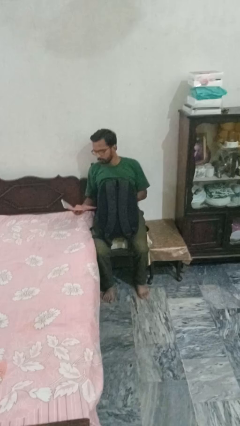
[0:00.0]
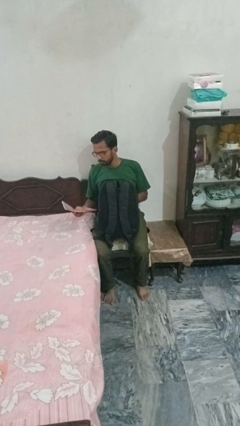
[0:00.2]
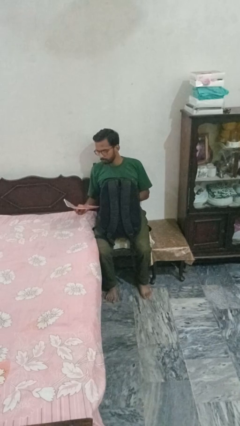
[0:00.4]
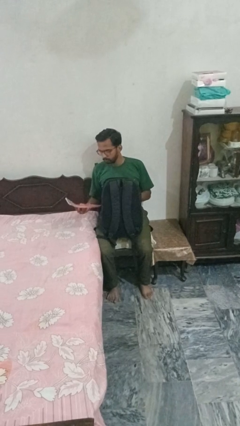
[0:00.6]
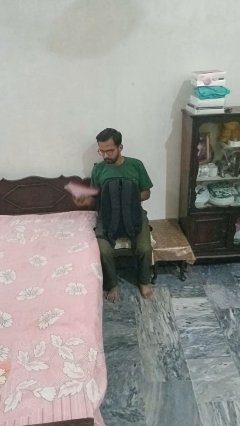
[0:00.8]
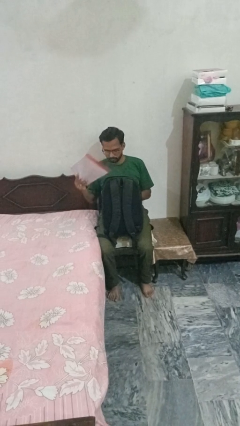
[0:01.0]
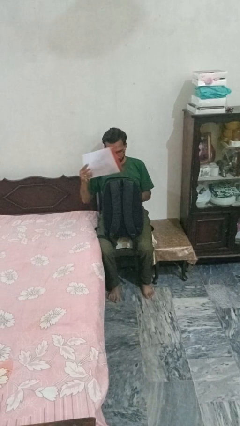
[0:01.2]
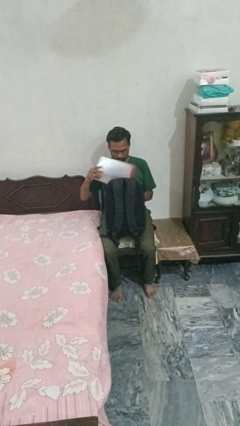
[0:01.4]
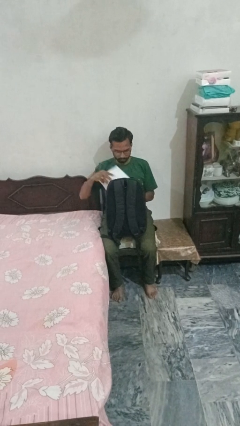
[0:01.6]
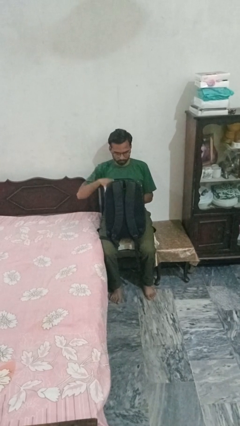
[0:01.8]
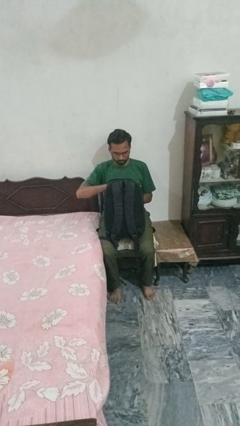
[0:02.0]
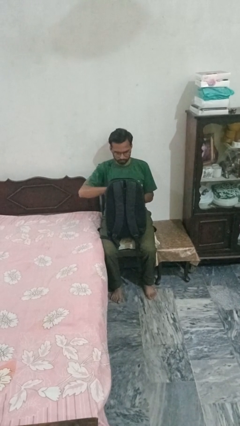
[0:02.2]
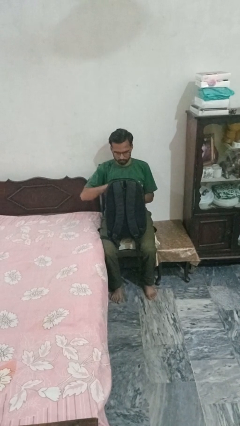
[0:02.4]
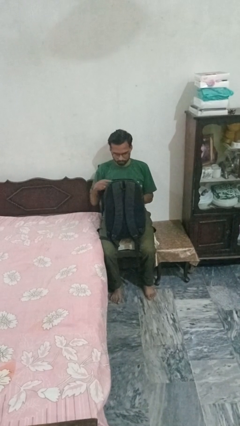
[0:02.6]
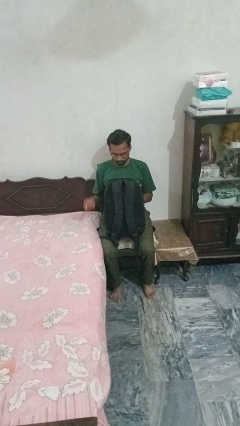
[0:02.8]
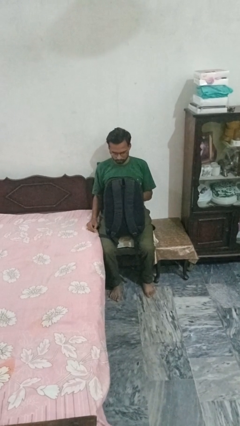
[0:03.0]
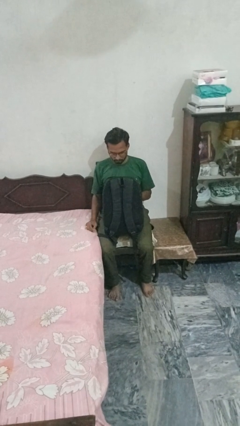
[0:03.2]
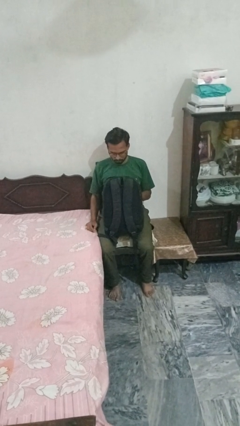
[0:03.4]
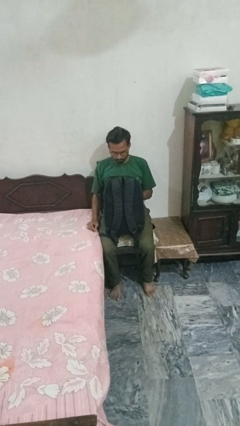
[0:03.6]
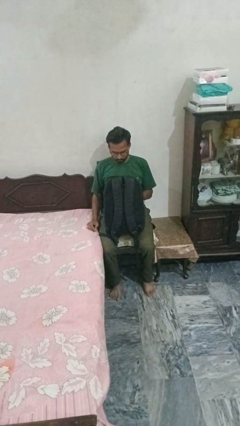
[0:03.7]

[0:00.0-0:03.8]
person puts object into backpack

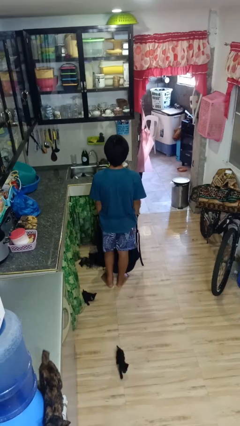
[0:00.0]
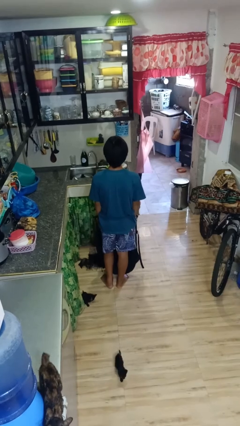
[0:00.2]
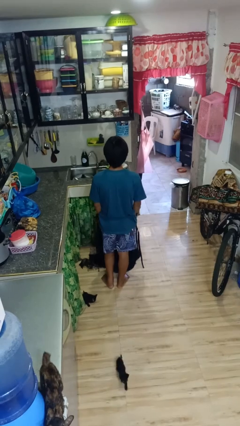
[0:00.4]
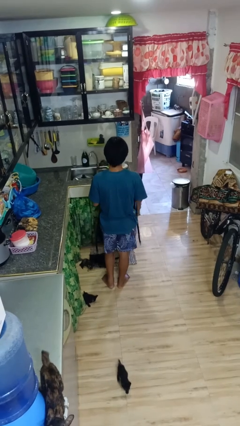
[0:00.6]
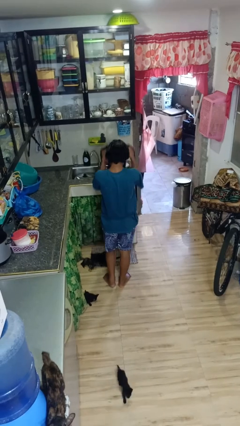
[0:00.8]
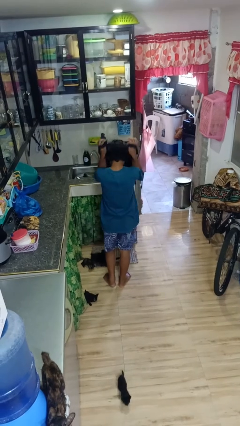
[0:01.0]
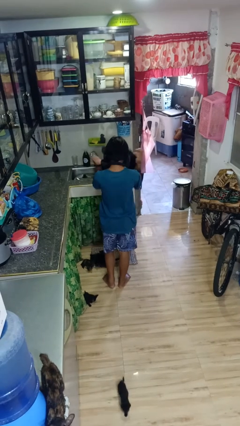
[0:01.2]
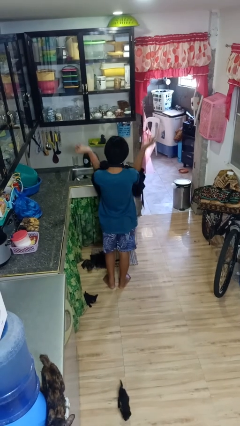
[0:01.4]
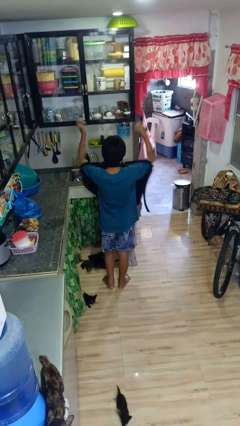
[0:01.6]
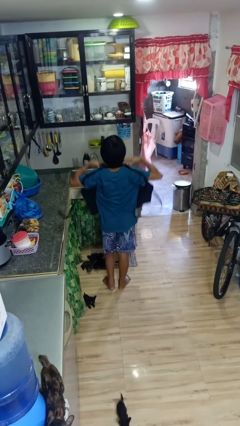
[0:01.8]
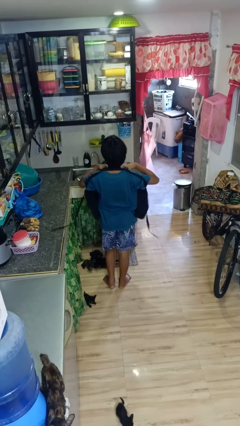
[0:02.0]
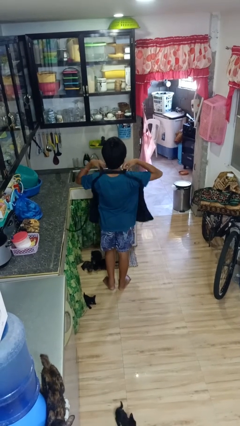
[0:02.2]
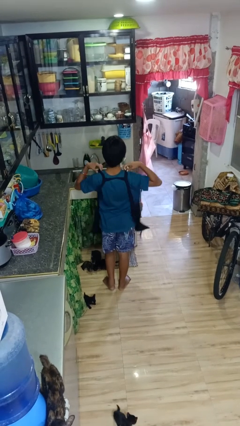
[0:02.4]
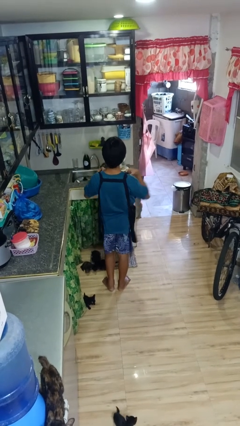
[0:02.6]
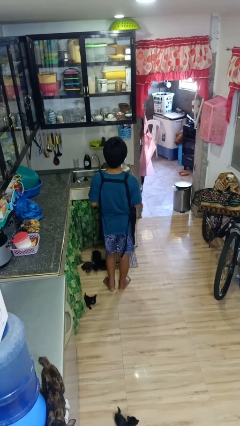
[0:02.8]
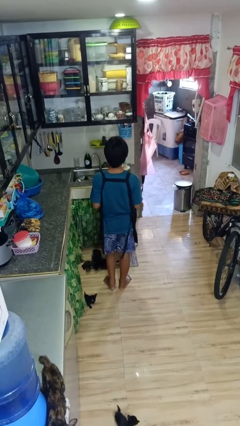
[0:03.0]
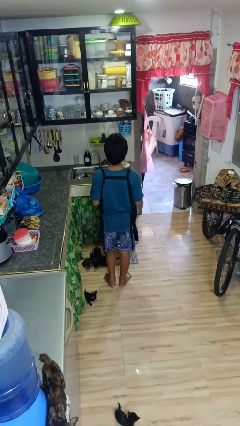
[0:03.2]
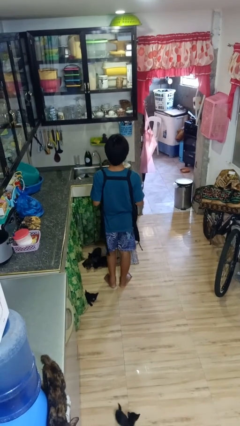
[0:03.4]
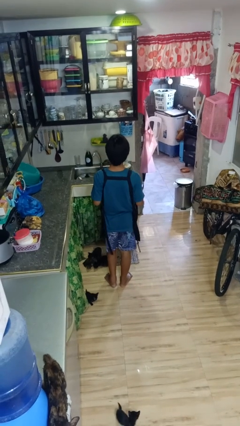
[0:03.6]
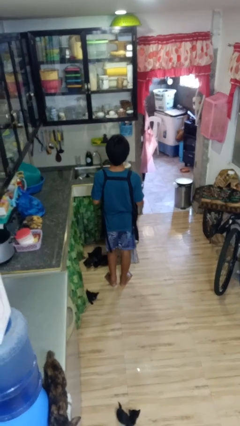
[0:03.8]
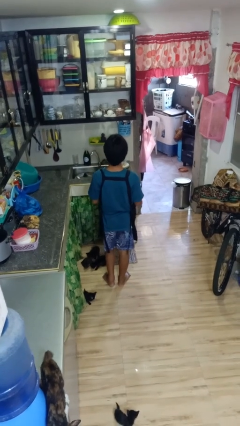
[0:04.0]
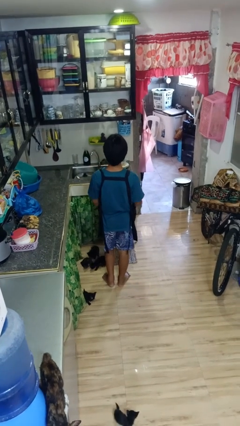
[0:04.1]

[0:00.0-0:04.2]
person puts on apron

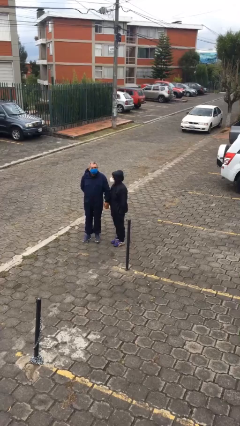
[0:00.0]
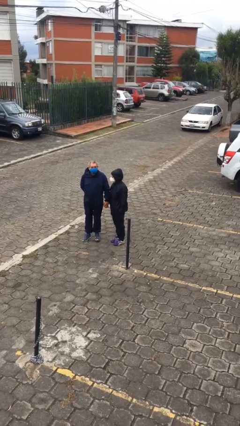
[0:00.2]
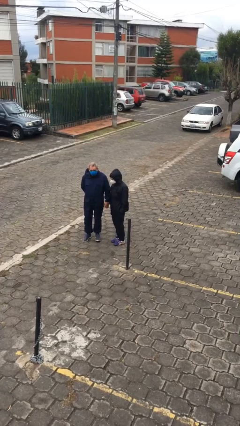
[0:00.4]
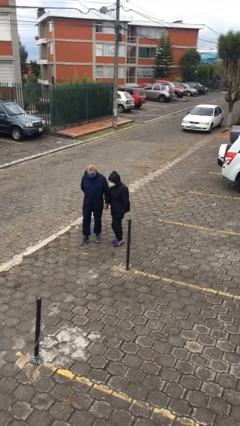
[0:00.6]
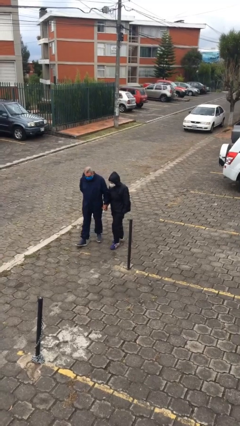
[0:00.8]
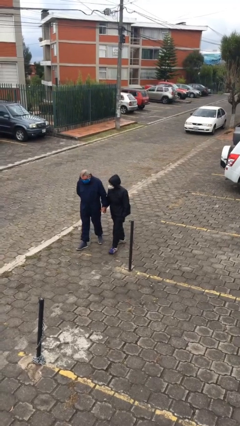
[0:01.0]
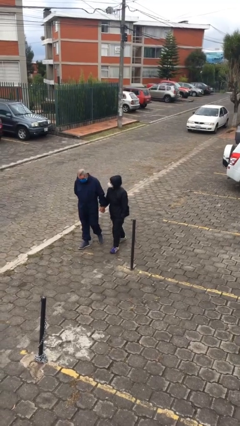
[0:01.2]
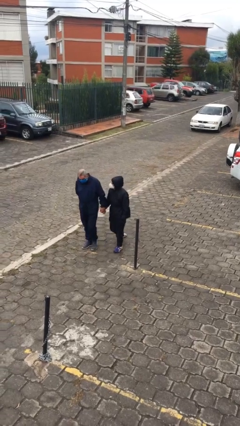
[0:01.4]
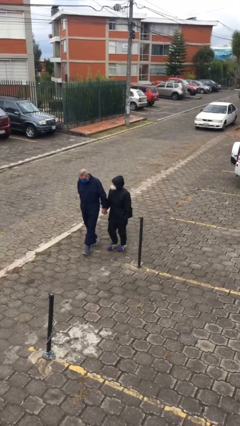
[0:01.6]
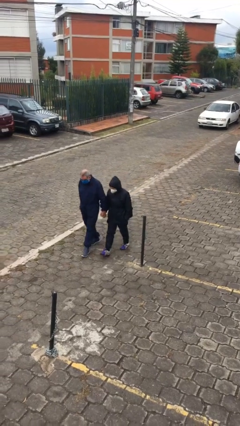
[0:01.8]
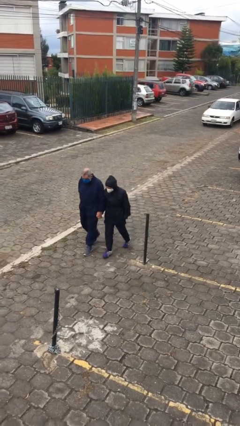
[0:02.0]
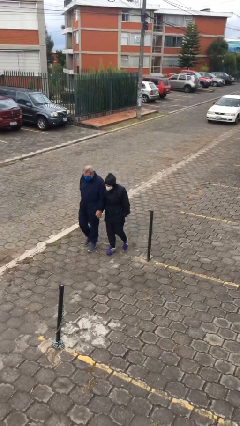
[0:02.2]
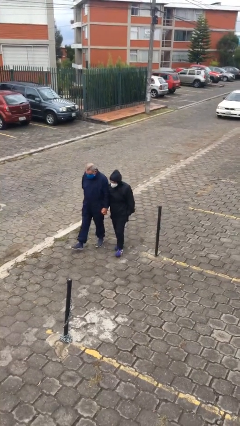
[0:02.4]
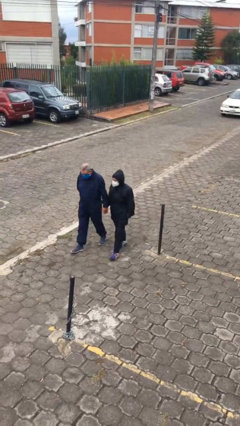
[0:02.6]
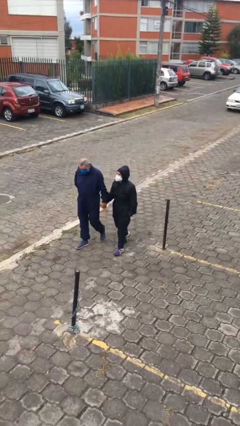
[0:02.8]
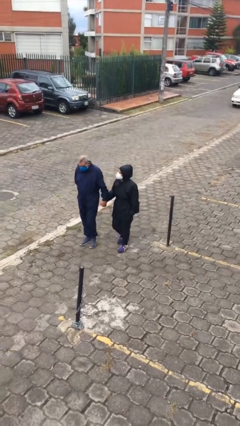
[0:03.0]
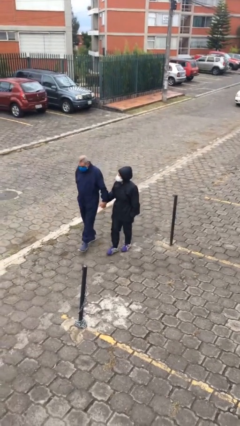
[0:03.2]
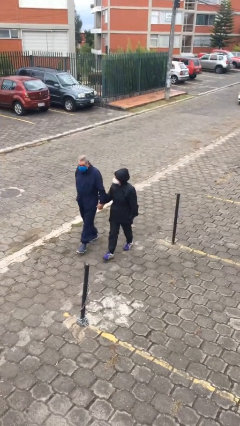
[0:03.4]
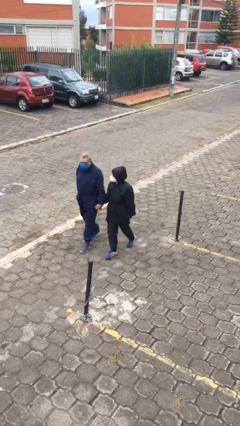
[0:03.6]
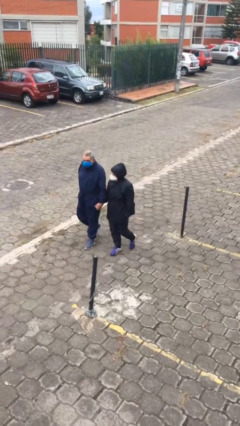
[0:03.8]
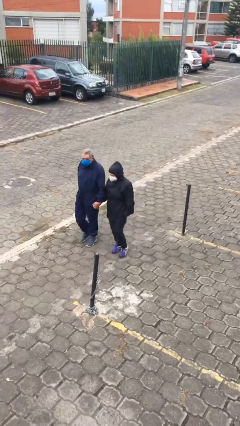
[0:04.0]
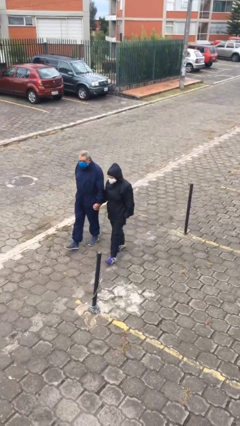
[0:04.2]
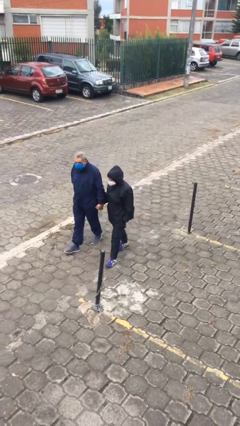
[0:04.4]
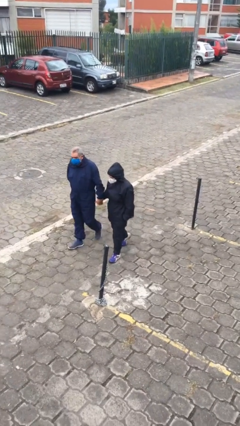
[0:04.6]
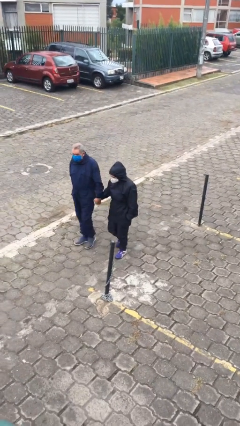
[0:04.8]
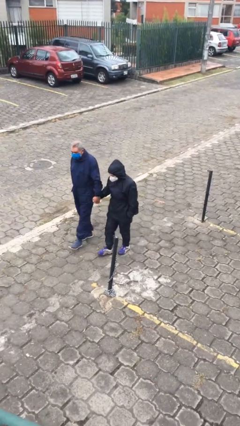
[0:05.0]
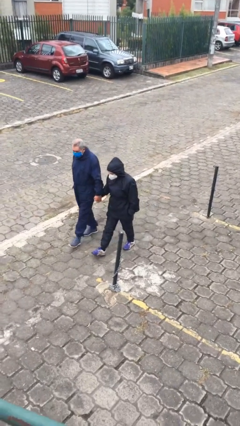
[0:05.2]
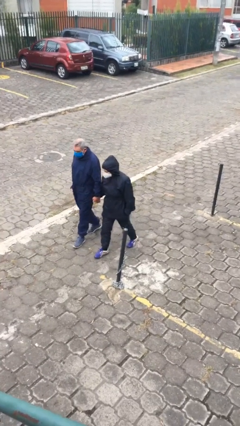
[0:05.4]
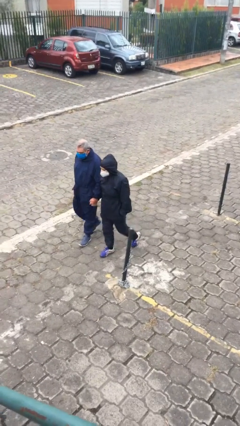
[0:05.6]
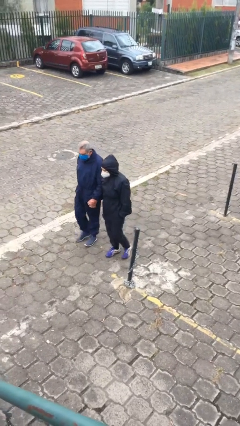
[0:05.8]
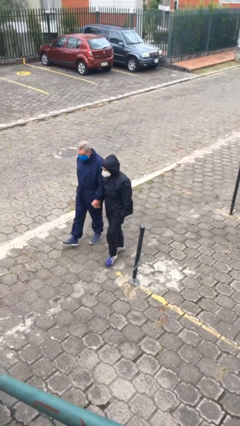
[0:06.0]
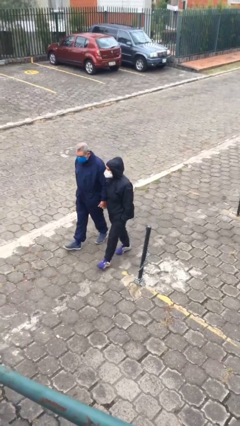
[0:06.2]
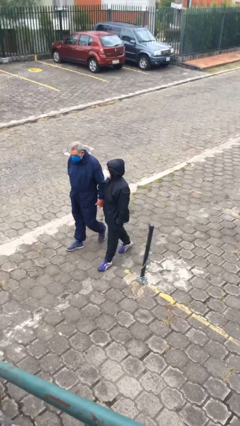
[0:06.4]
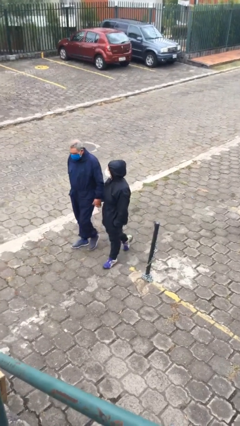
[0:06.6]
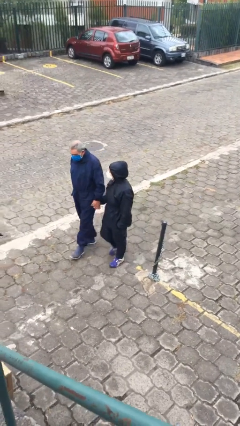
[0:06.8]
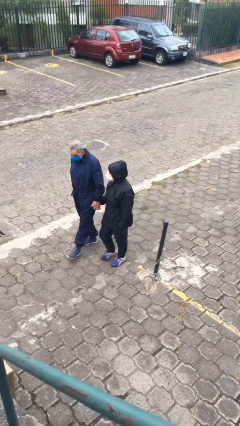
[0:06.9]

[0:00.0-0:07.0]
person holds hand

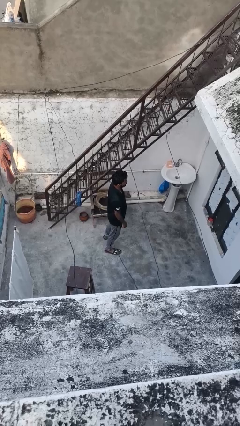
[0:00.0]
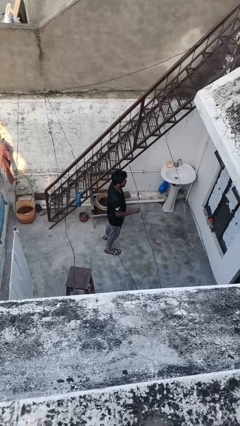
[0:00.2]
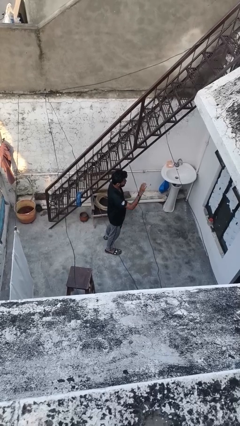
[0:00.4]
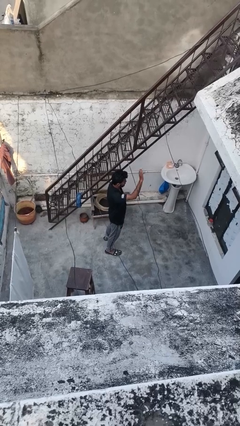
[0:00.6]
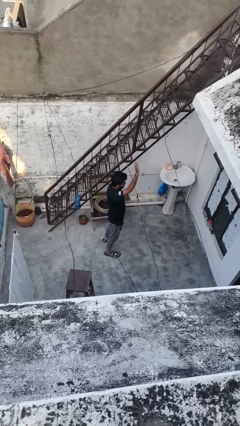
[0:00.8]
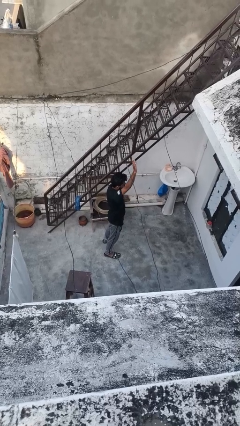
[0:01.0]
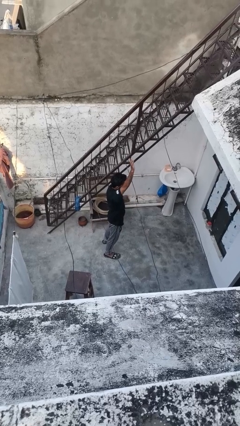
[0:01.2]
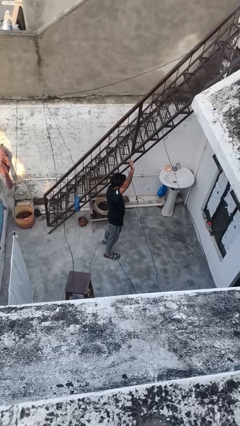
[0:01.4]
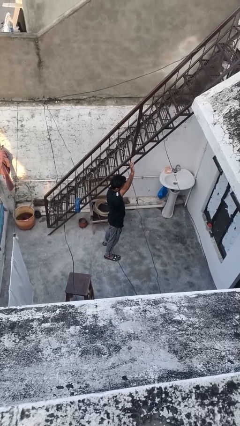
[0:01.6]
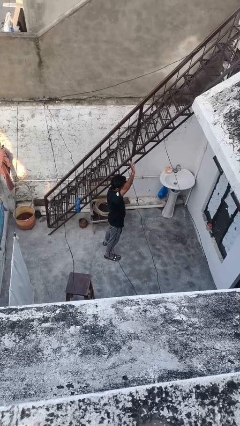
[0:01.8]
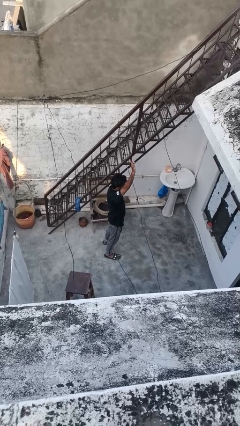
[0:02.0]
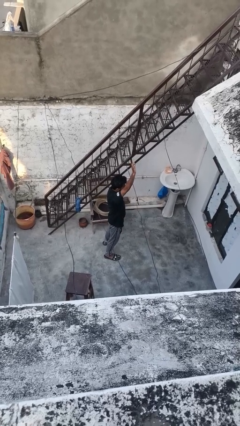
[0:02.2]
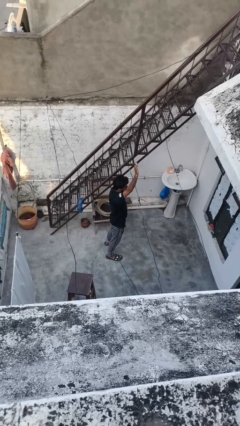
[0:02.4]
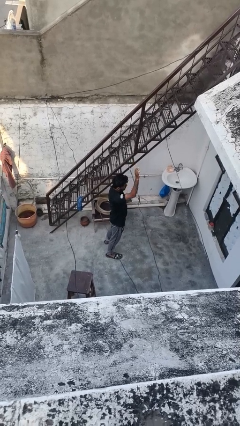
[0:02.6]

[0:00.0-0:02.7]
person gestures raise hand
